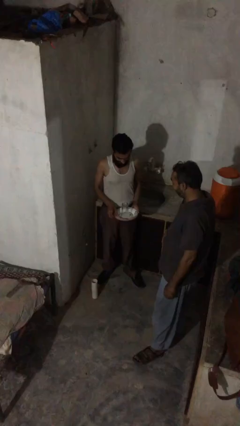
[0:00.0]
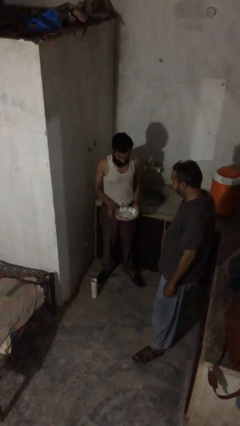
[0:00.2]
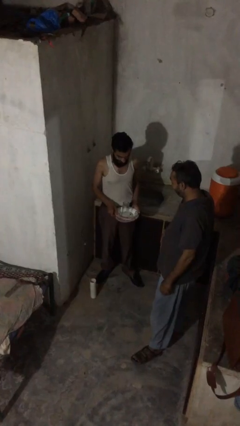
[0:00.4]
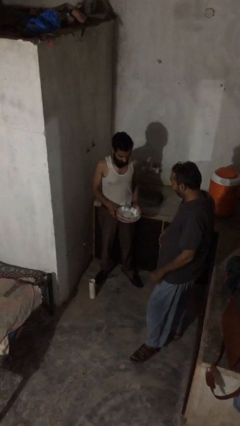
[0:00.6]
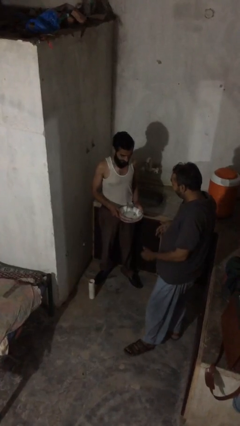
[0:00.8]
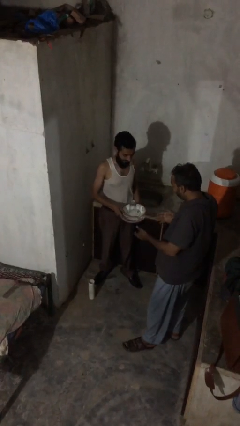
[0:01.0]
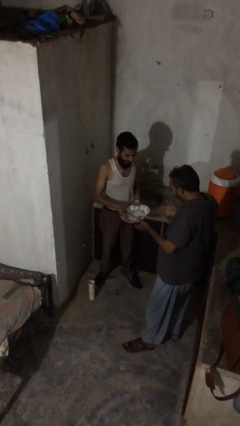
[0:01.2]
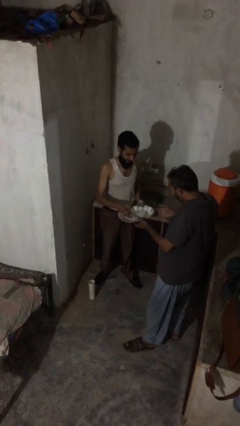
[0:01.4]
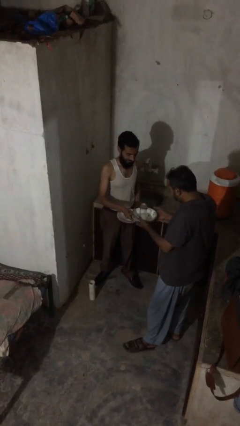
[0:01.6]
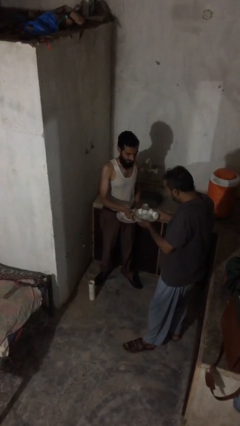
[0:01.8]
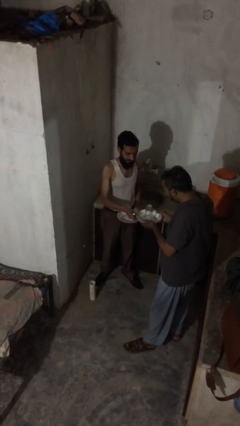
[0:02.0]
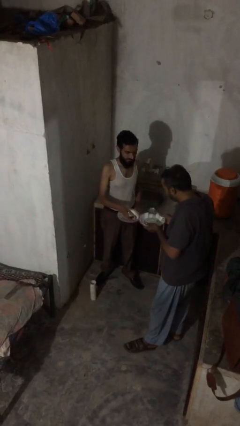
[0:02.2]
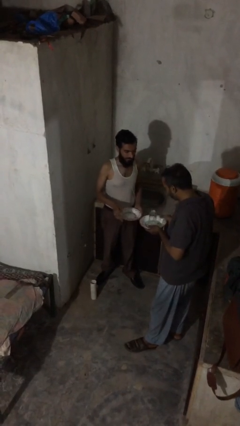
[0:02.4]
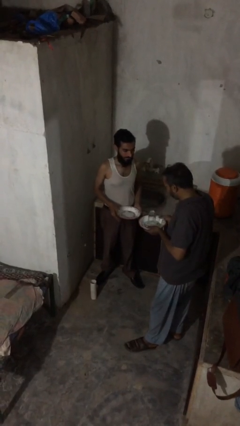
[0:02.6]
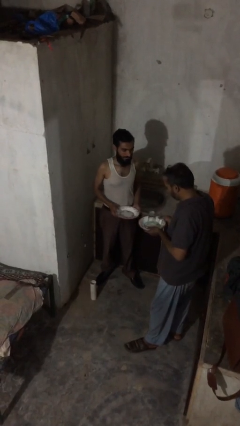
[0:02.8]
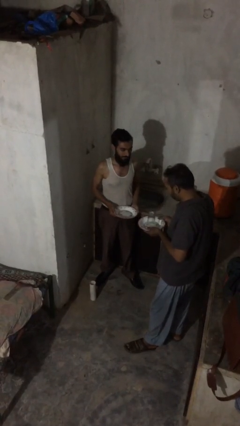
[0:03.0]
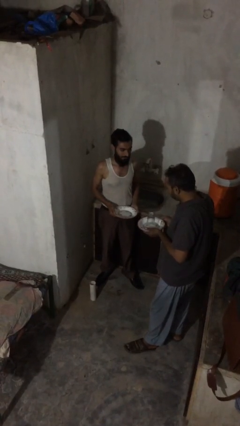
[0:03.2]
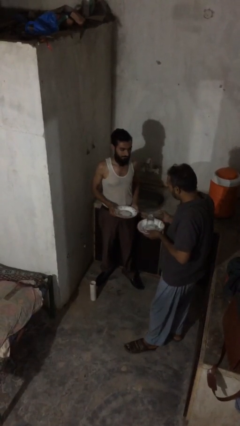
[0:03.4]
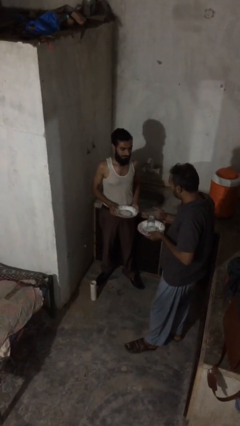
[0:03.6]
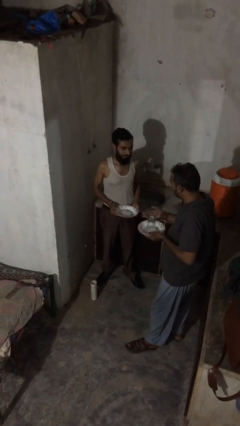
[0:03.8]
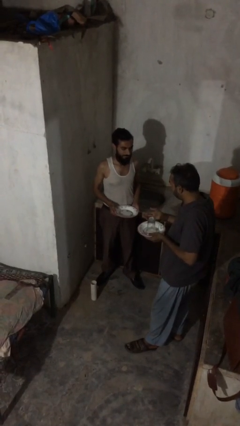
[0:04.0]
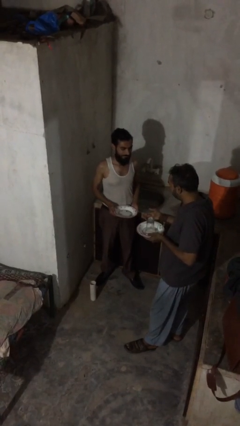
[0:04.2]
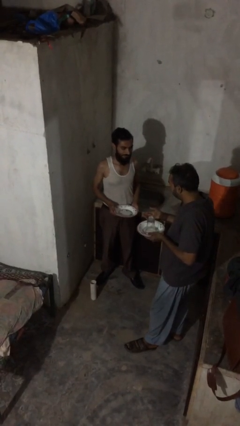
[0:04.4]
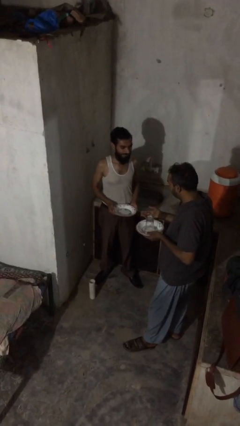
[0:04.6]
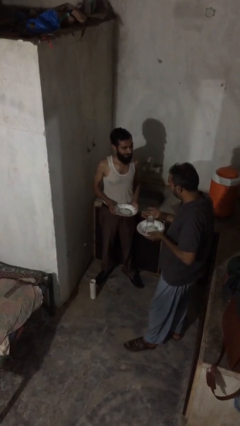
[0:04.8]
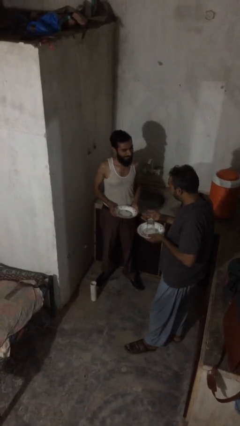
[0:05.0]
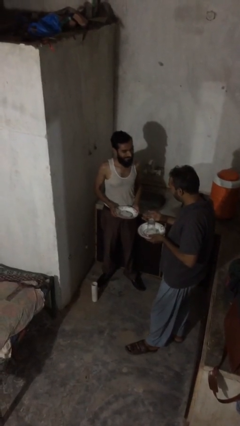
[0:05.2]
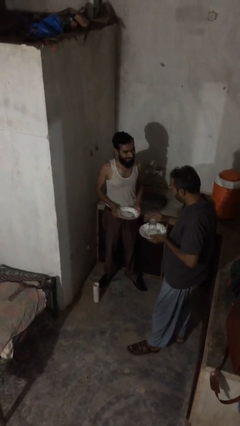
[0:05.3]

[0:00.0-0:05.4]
person transfers object to person

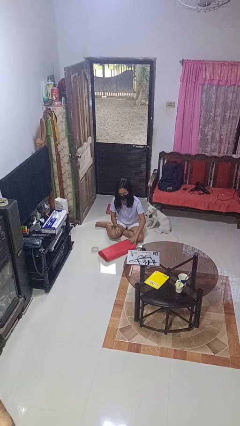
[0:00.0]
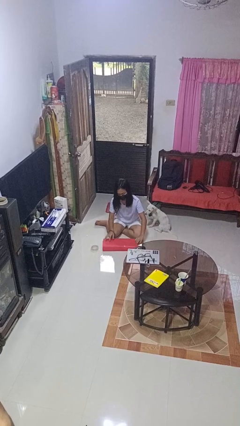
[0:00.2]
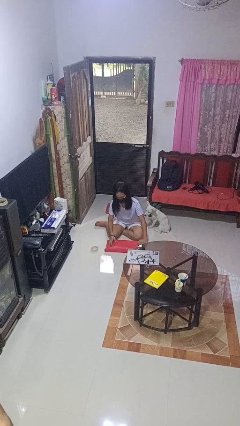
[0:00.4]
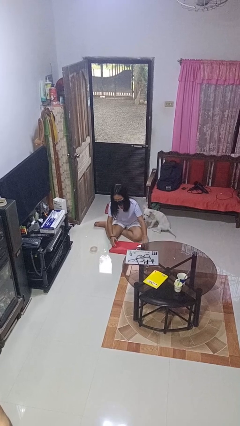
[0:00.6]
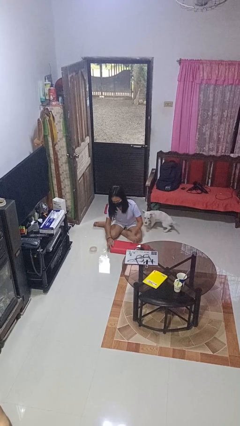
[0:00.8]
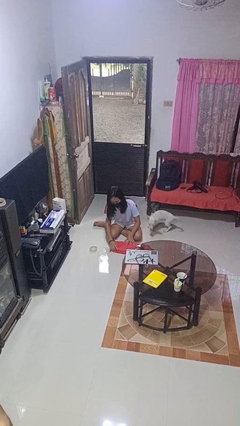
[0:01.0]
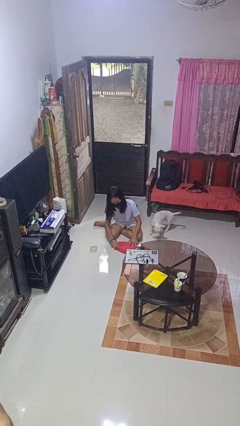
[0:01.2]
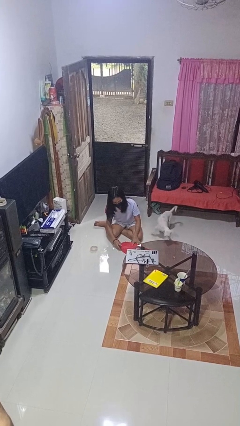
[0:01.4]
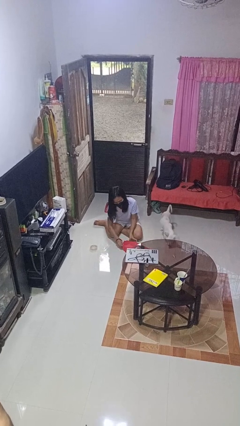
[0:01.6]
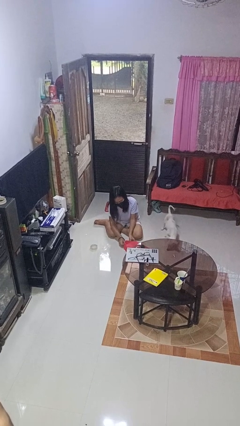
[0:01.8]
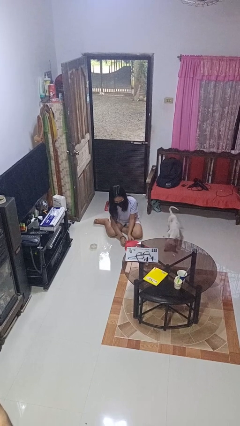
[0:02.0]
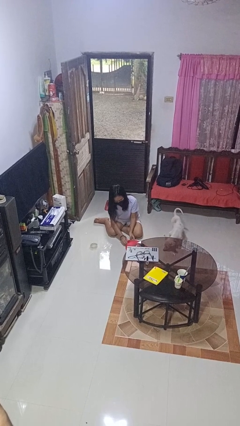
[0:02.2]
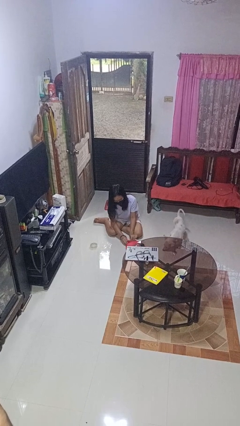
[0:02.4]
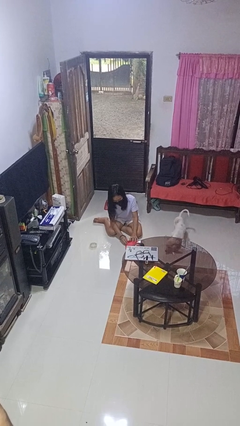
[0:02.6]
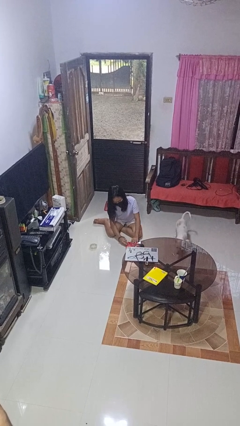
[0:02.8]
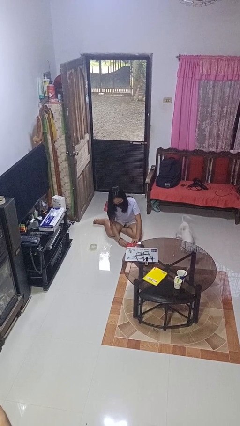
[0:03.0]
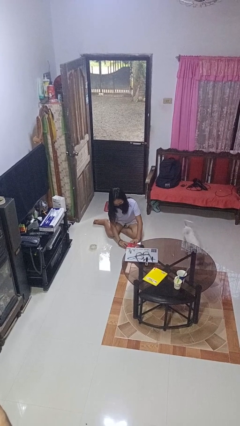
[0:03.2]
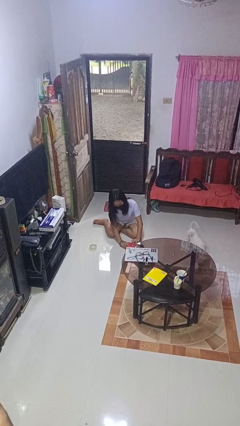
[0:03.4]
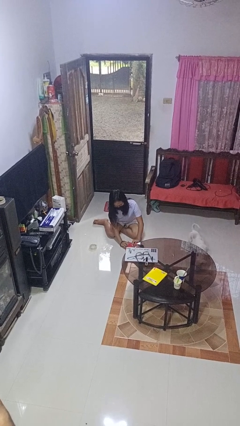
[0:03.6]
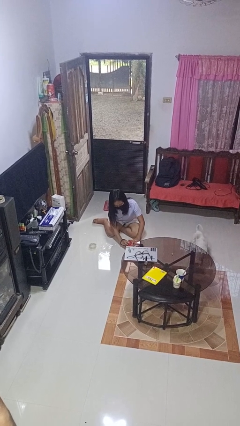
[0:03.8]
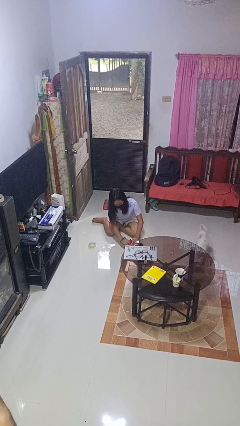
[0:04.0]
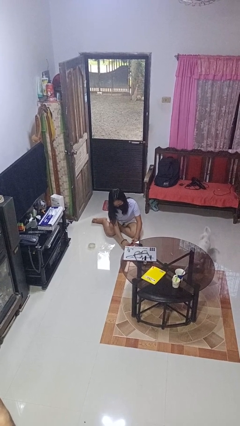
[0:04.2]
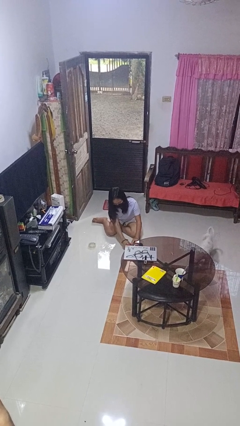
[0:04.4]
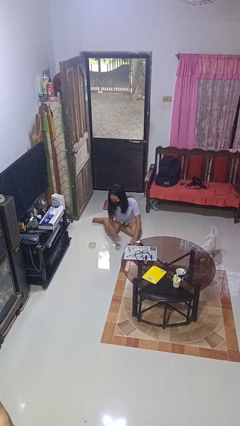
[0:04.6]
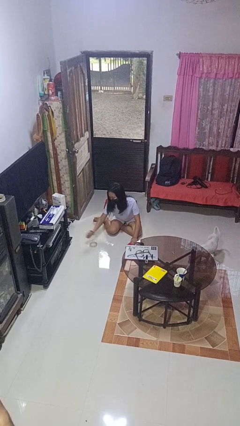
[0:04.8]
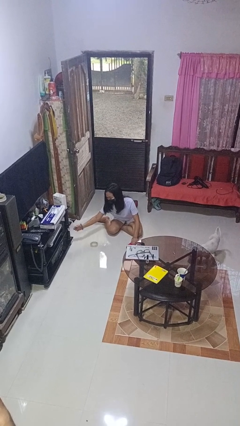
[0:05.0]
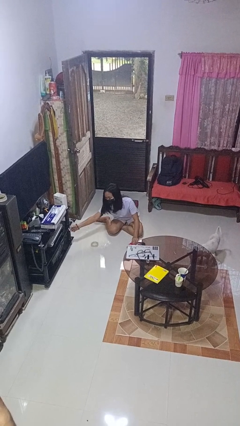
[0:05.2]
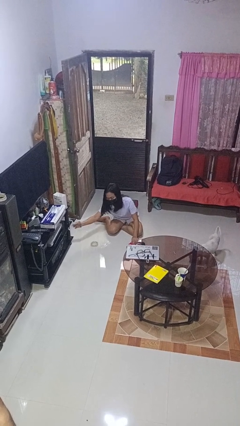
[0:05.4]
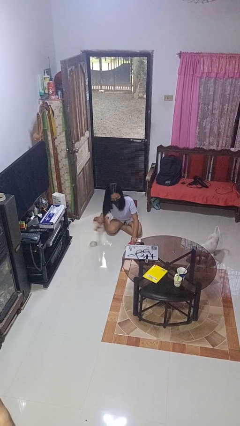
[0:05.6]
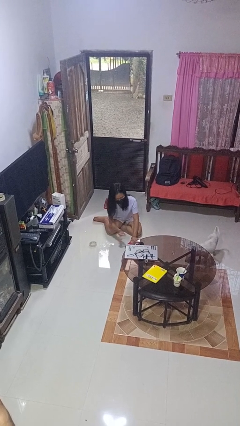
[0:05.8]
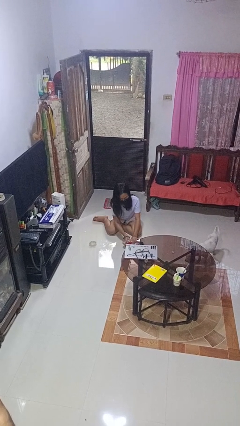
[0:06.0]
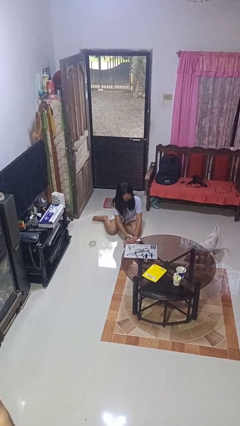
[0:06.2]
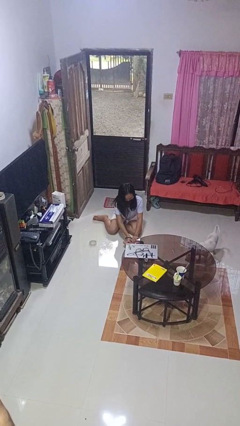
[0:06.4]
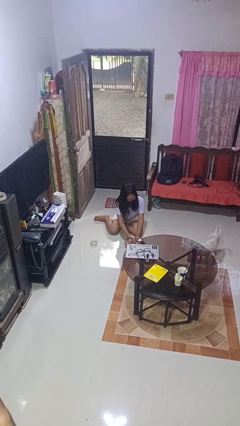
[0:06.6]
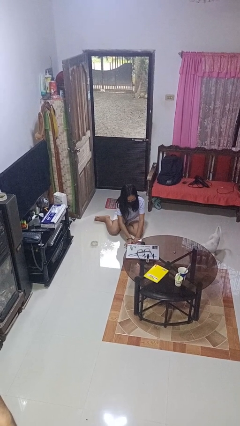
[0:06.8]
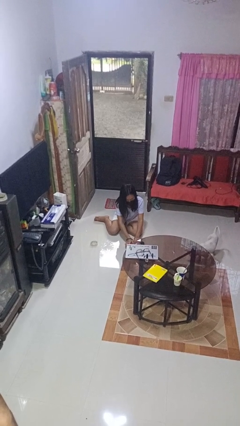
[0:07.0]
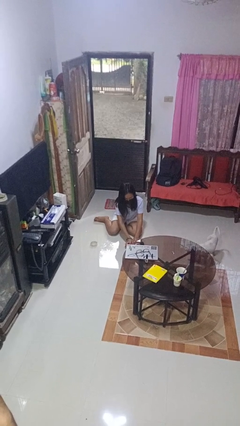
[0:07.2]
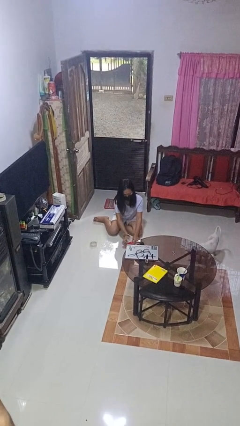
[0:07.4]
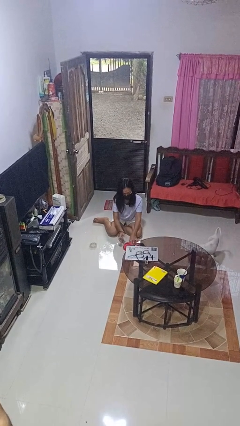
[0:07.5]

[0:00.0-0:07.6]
person wraps box

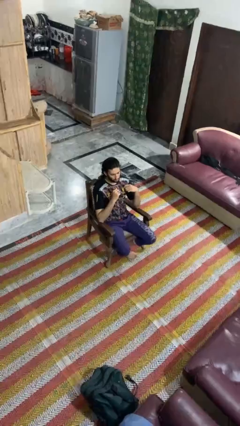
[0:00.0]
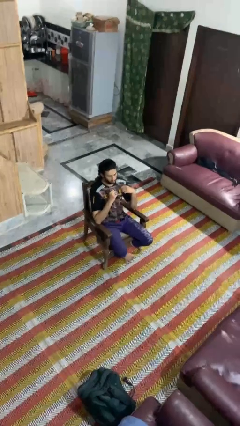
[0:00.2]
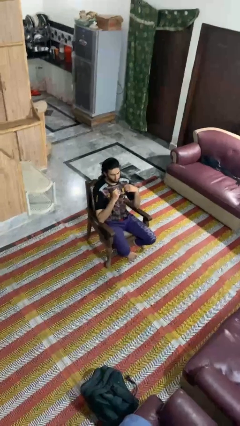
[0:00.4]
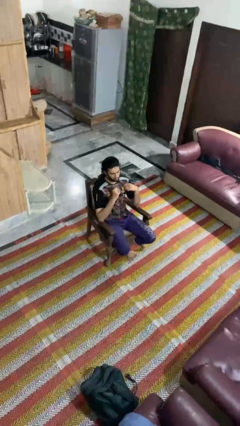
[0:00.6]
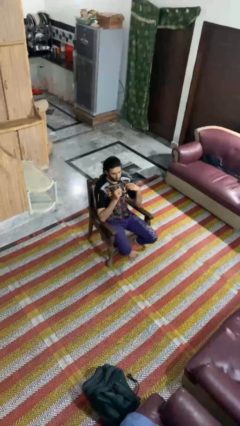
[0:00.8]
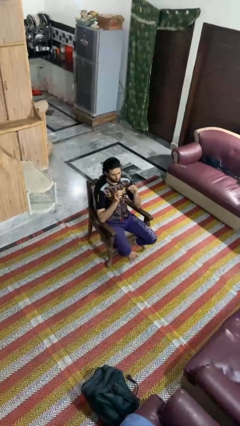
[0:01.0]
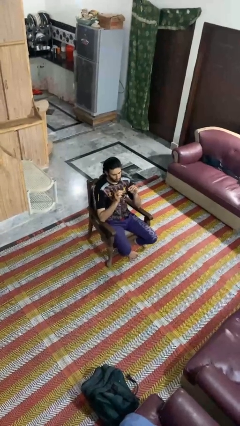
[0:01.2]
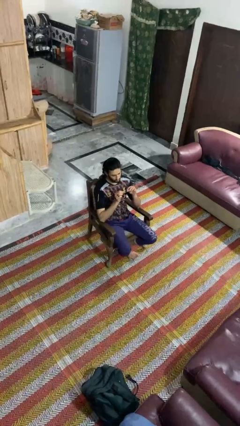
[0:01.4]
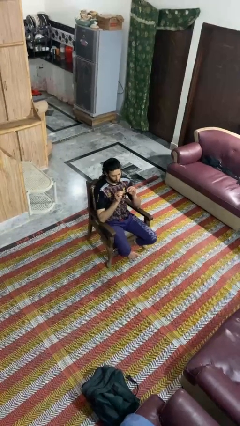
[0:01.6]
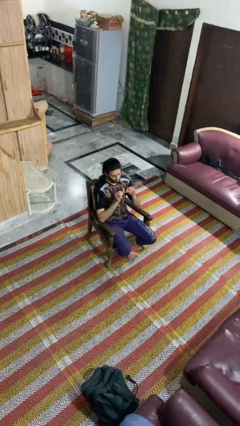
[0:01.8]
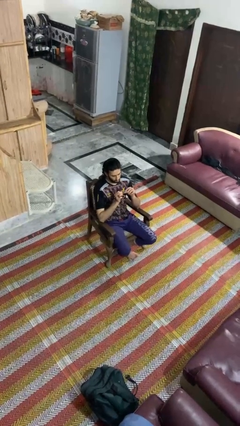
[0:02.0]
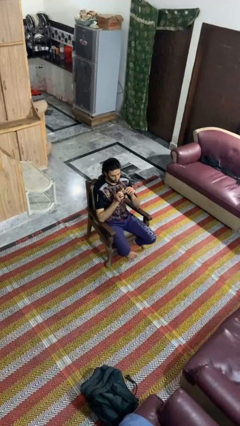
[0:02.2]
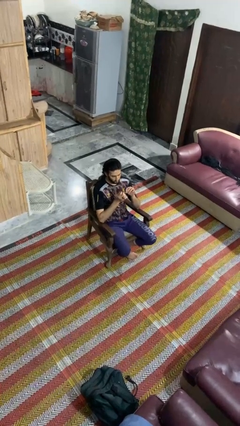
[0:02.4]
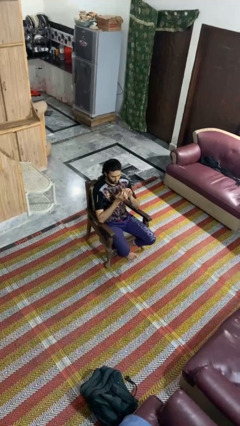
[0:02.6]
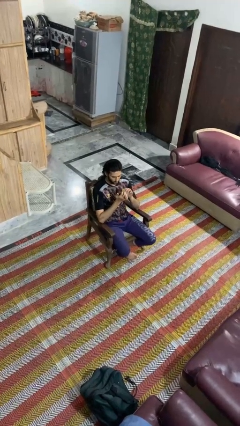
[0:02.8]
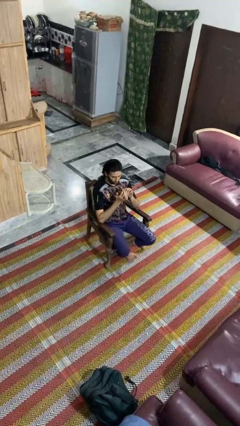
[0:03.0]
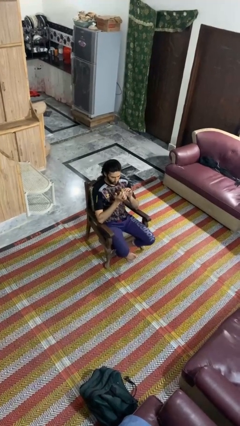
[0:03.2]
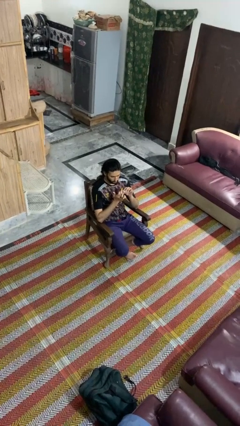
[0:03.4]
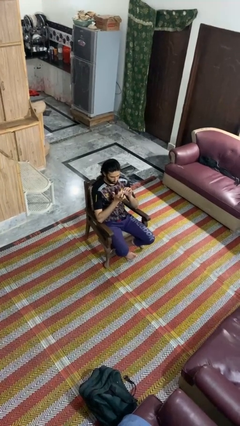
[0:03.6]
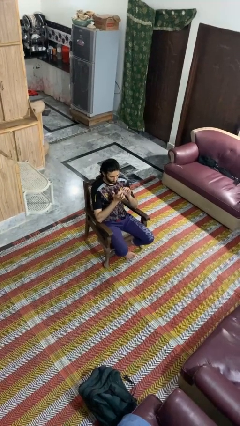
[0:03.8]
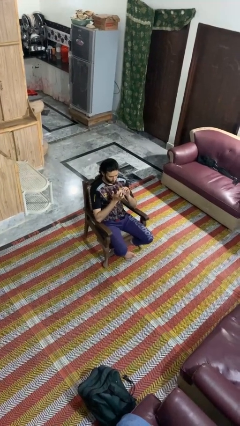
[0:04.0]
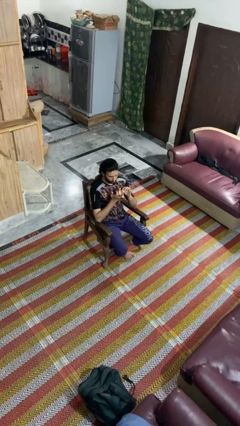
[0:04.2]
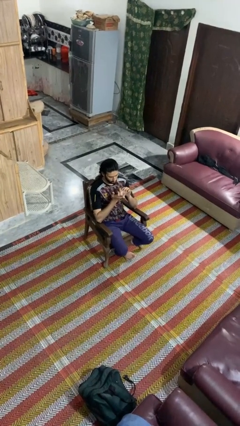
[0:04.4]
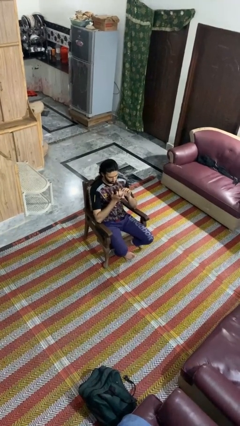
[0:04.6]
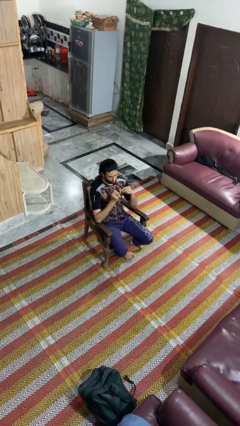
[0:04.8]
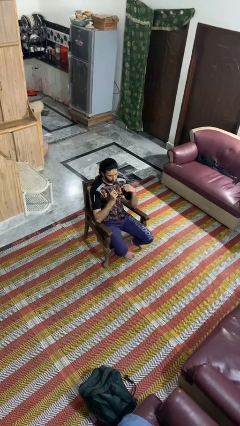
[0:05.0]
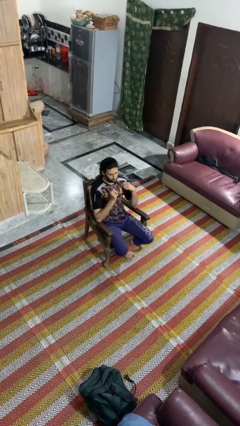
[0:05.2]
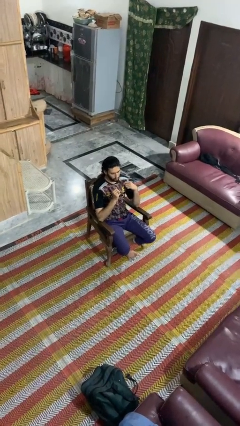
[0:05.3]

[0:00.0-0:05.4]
person files fingernails
